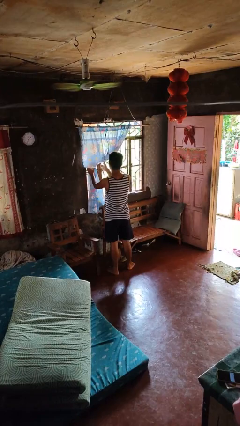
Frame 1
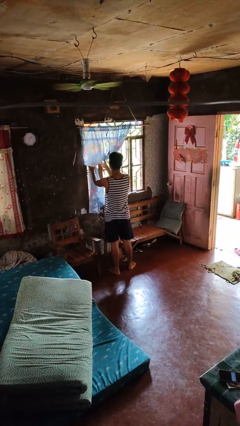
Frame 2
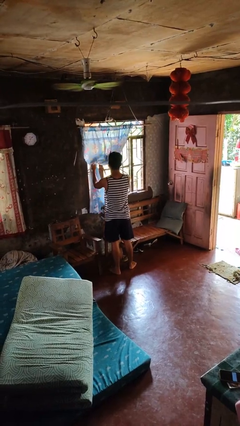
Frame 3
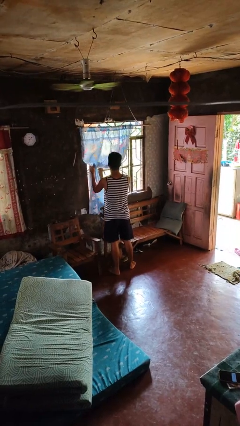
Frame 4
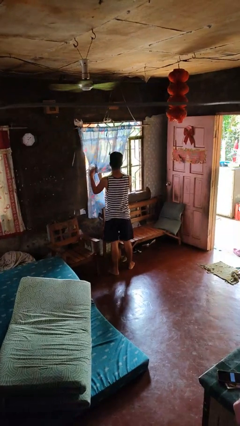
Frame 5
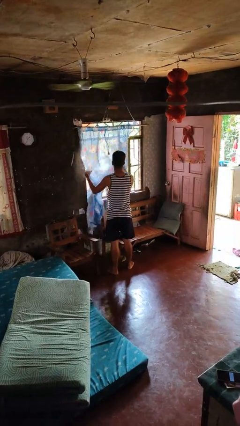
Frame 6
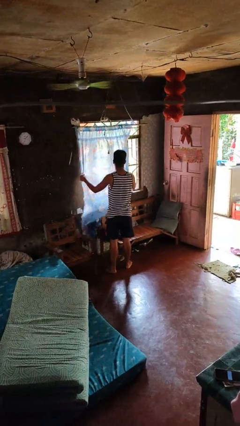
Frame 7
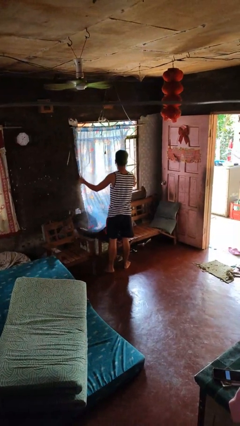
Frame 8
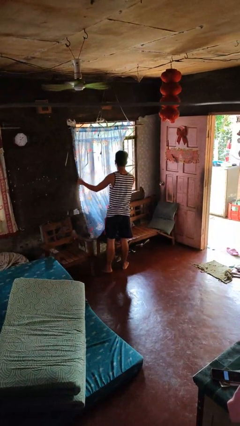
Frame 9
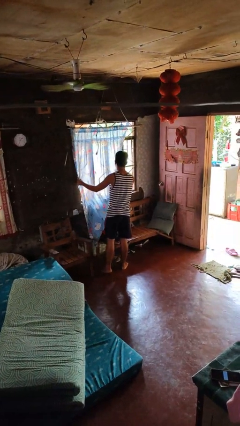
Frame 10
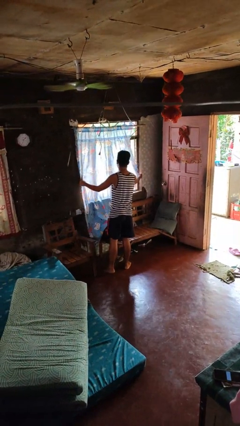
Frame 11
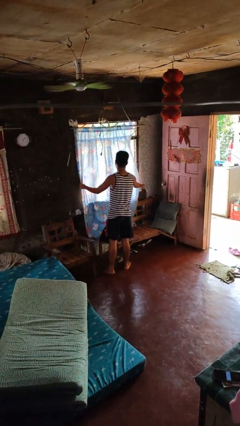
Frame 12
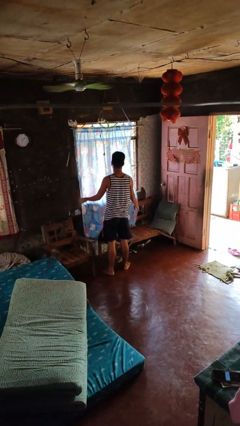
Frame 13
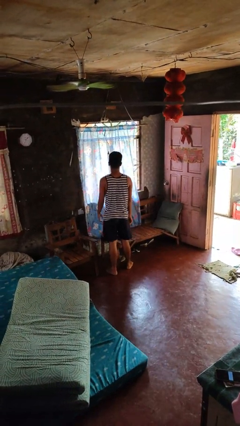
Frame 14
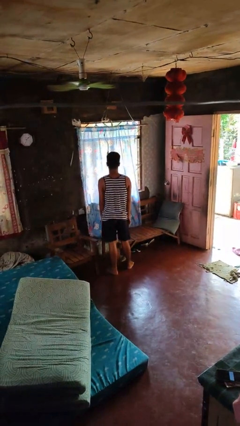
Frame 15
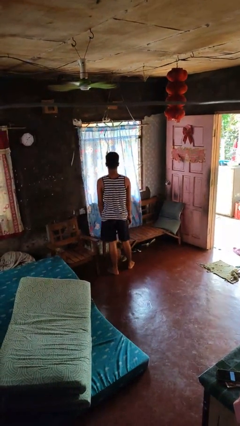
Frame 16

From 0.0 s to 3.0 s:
person closes curtains

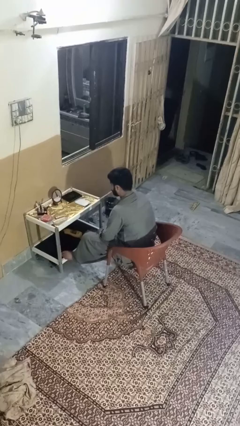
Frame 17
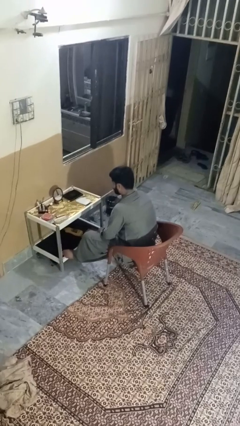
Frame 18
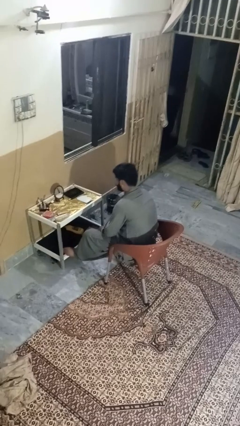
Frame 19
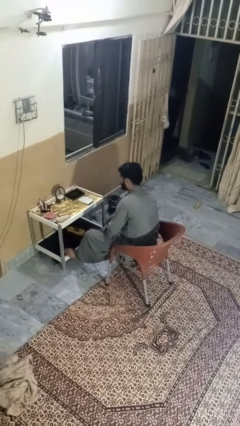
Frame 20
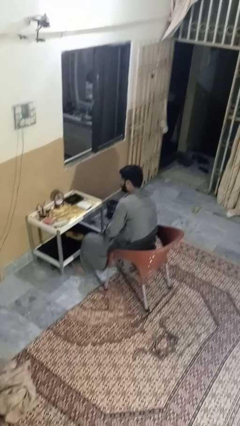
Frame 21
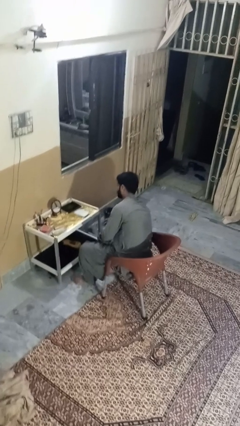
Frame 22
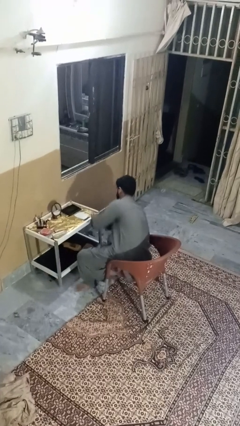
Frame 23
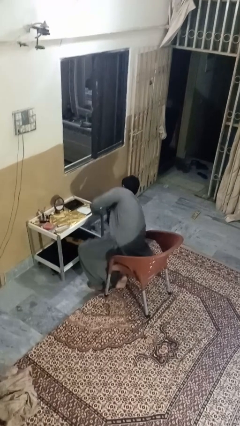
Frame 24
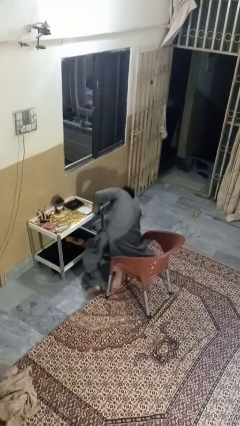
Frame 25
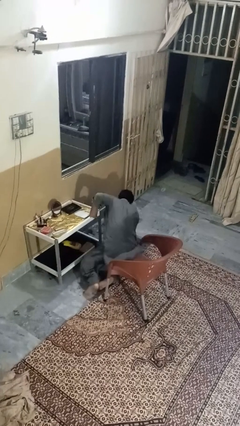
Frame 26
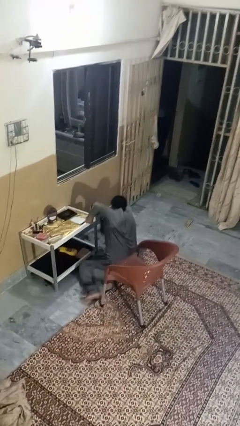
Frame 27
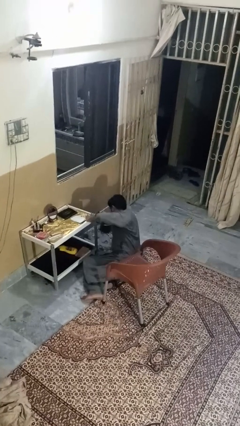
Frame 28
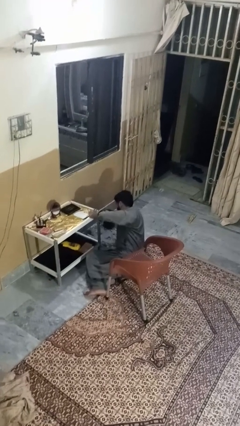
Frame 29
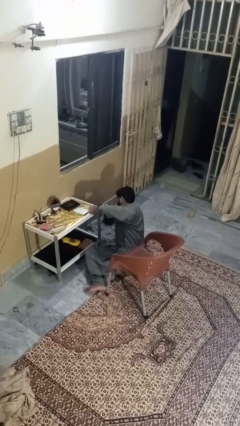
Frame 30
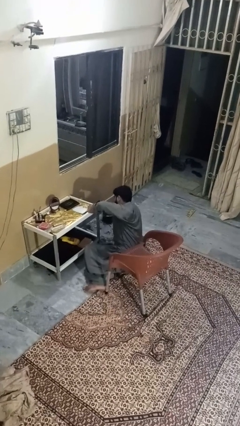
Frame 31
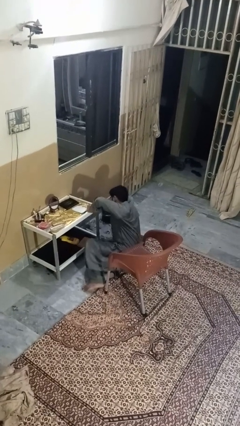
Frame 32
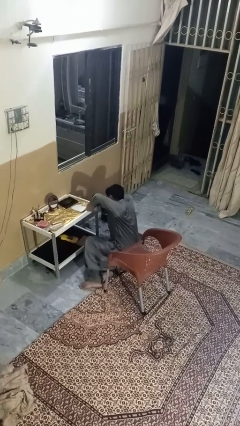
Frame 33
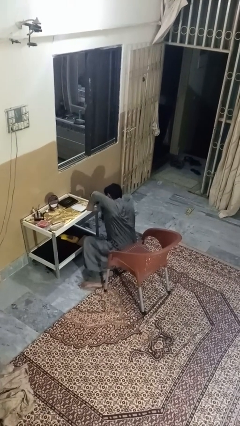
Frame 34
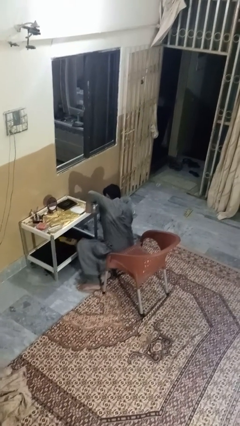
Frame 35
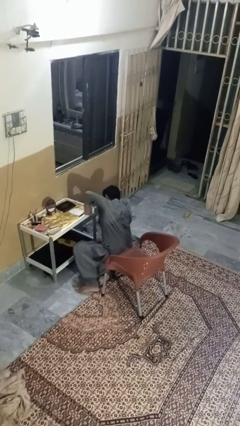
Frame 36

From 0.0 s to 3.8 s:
person falls from chair

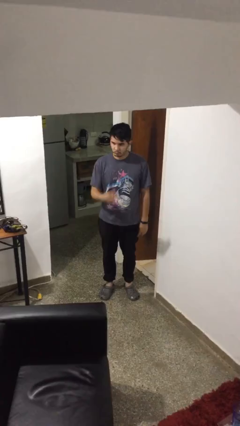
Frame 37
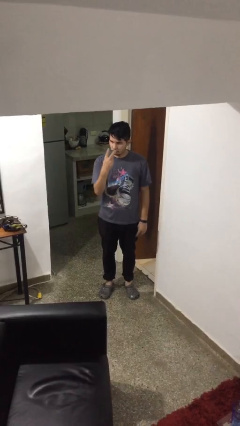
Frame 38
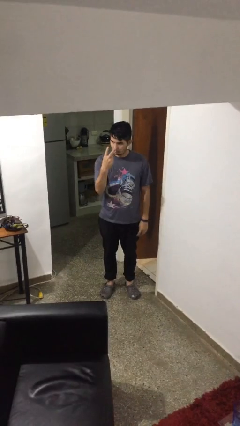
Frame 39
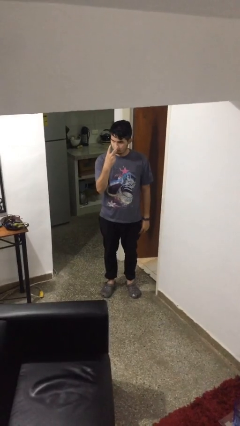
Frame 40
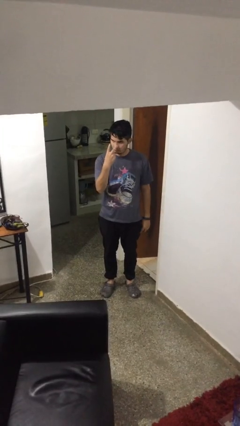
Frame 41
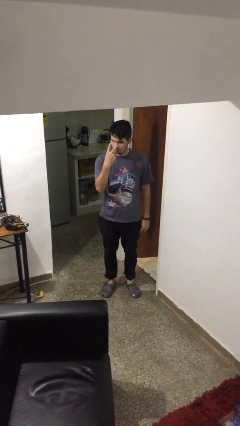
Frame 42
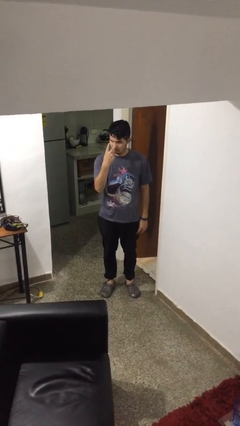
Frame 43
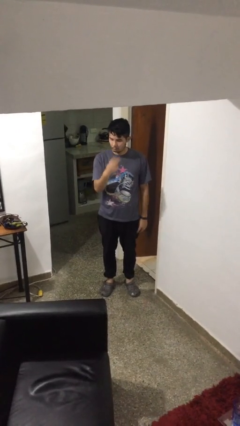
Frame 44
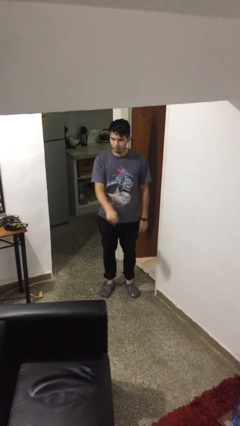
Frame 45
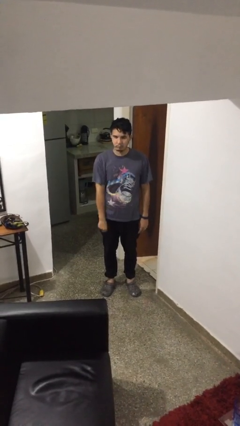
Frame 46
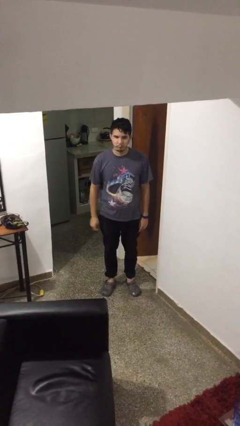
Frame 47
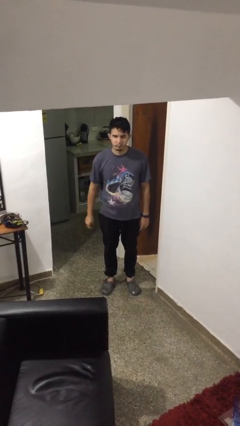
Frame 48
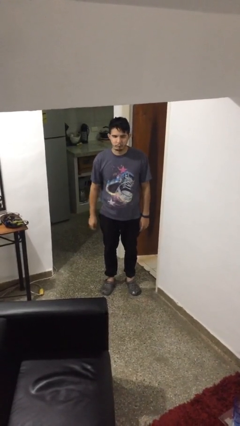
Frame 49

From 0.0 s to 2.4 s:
person gestures watch closely

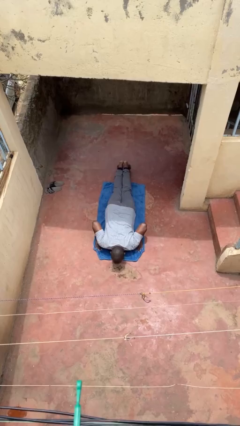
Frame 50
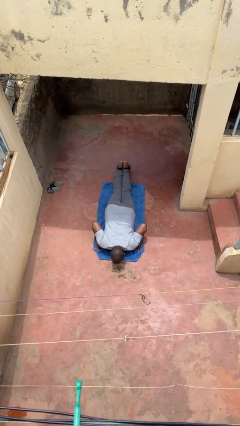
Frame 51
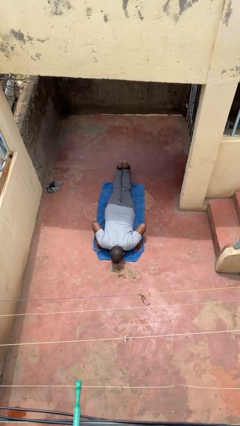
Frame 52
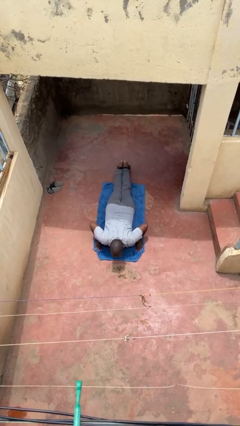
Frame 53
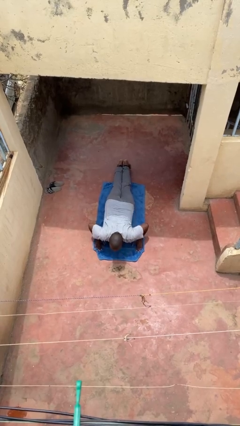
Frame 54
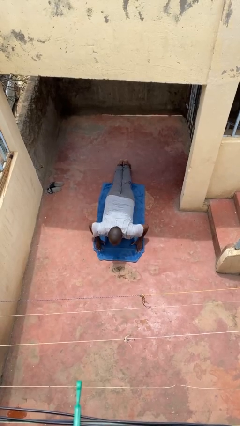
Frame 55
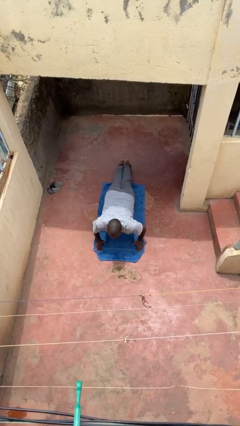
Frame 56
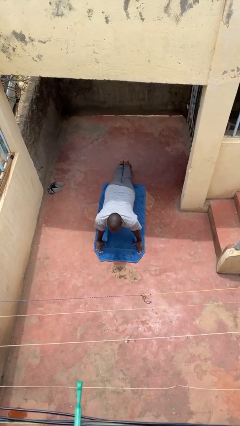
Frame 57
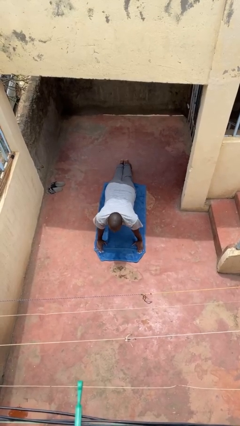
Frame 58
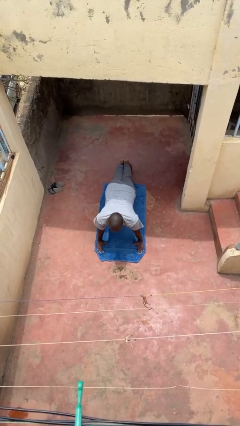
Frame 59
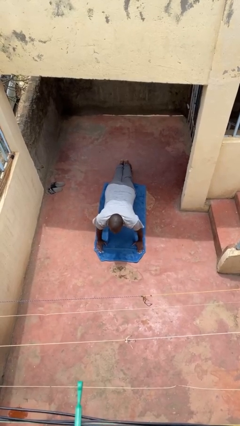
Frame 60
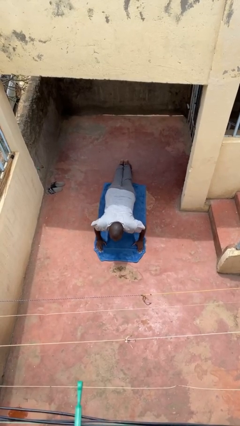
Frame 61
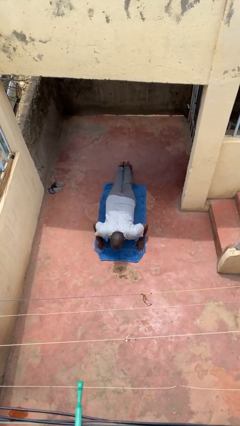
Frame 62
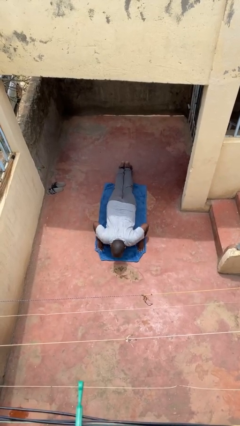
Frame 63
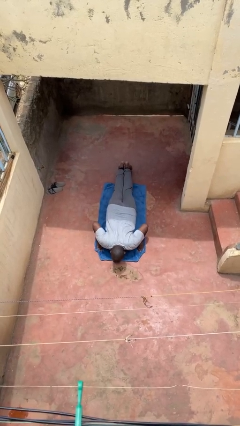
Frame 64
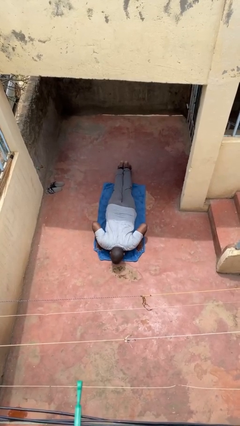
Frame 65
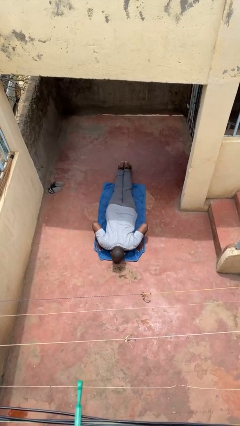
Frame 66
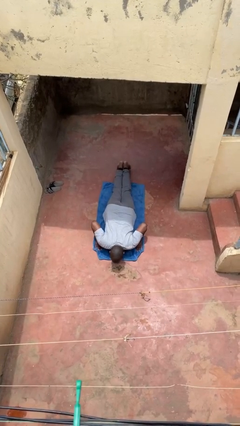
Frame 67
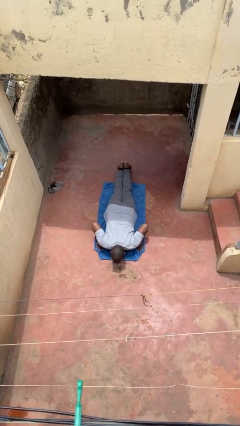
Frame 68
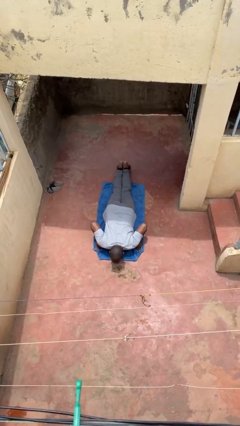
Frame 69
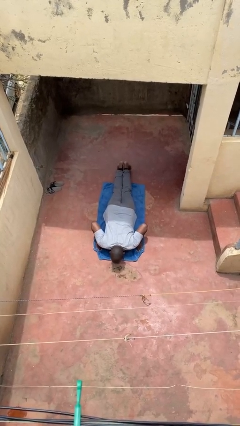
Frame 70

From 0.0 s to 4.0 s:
person exercises with pushup

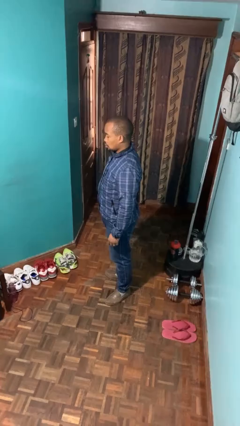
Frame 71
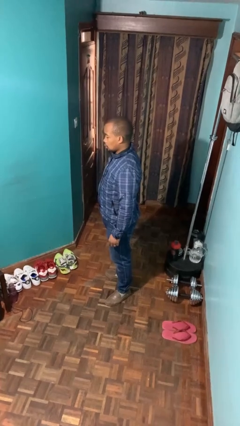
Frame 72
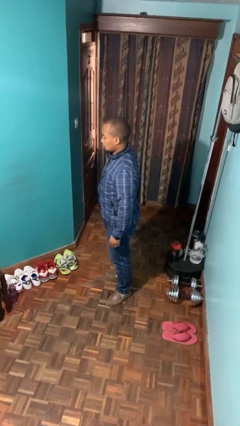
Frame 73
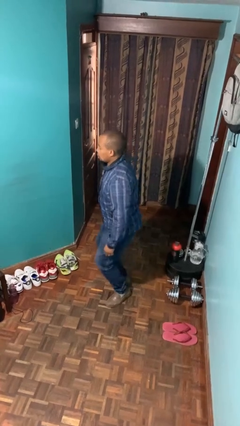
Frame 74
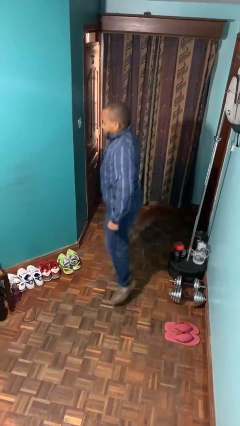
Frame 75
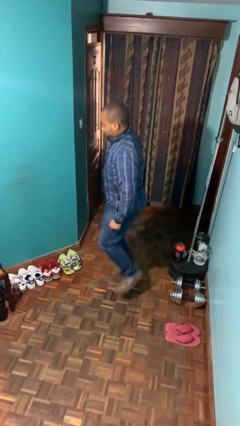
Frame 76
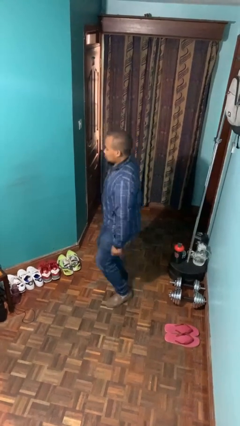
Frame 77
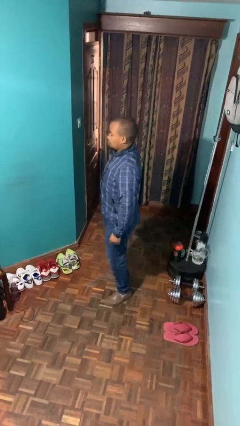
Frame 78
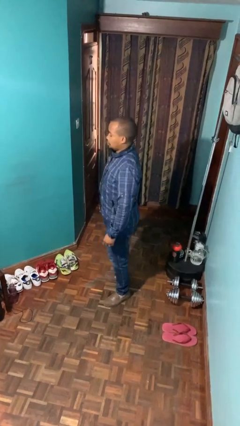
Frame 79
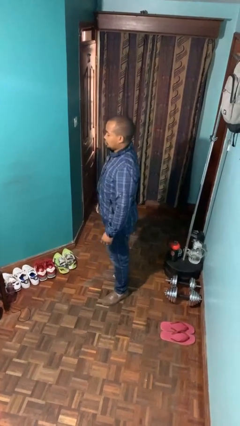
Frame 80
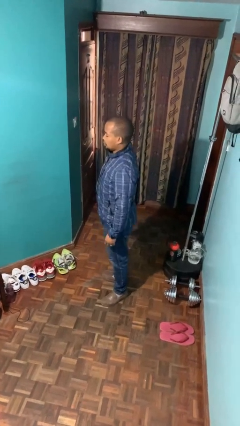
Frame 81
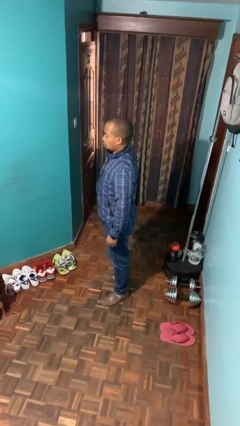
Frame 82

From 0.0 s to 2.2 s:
person jumps

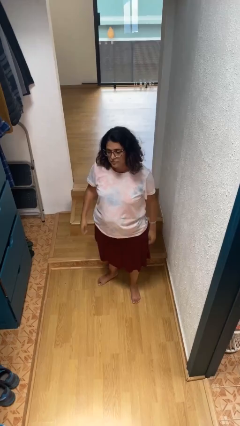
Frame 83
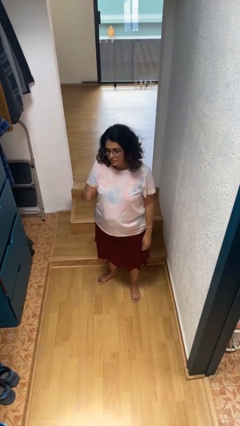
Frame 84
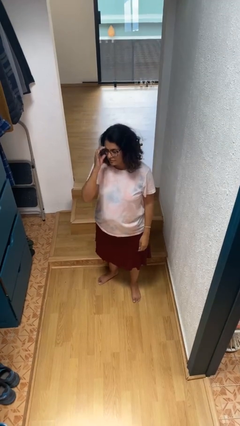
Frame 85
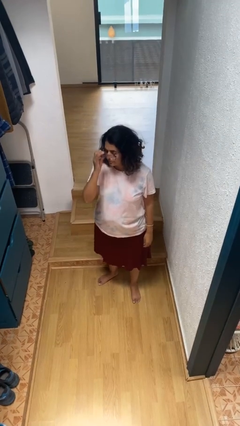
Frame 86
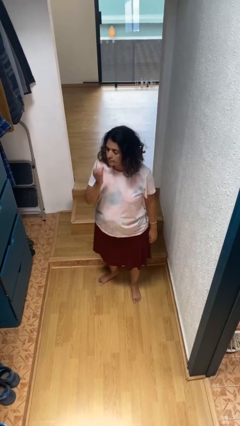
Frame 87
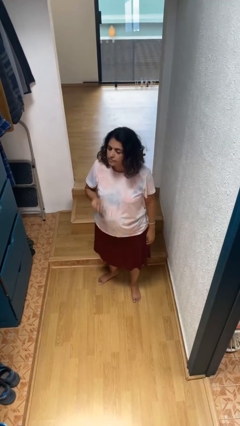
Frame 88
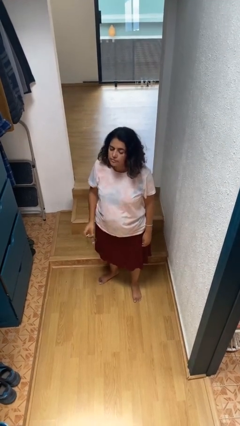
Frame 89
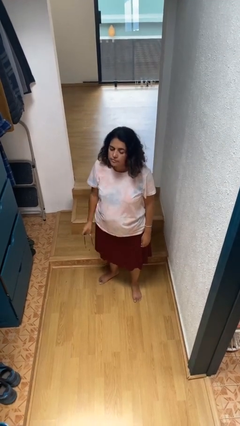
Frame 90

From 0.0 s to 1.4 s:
person takes off glasses

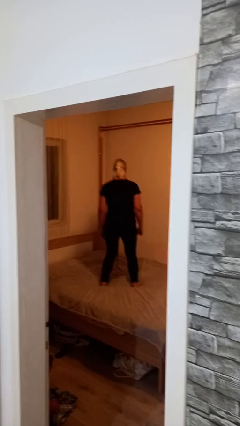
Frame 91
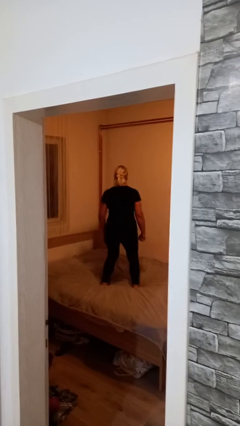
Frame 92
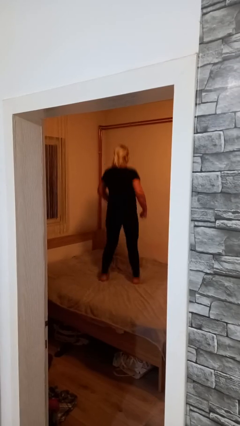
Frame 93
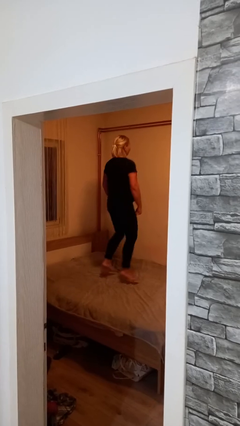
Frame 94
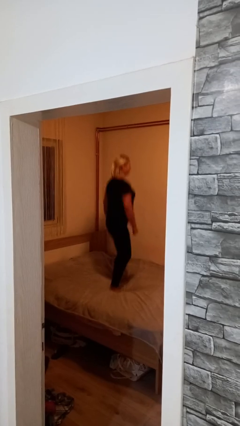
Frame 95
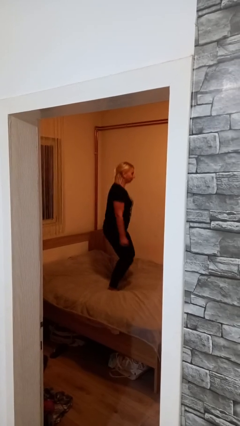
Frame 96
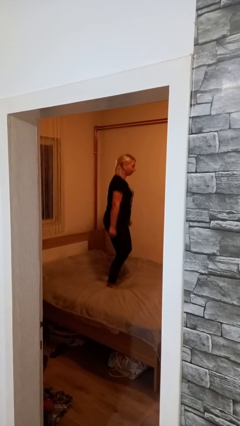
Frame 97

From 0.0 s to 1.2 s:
person jumps on bed
